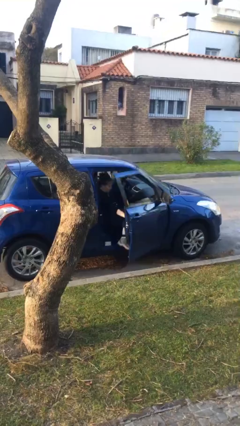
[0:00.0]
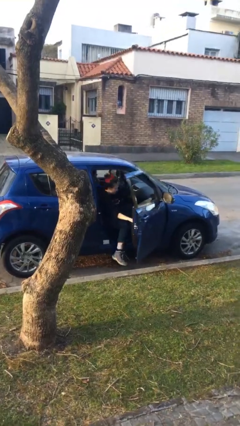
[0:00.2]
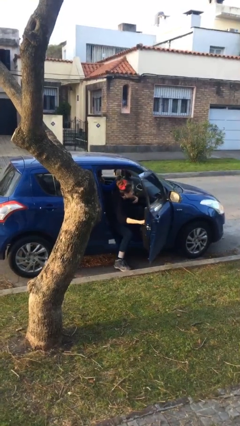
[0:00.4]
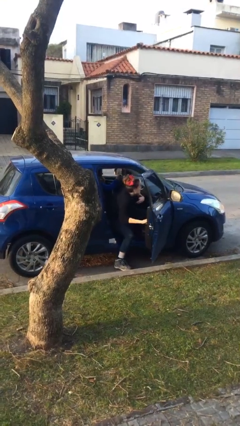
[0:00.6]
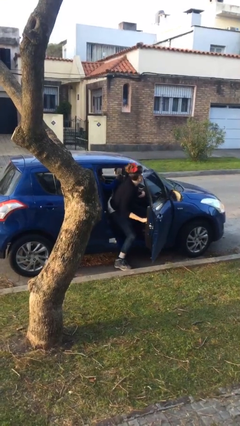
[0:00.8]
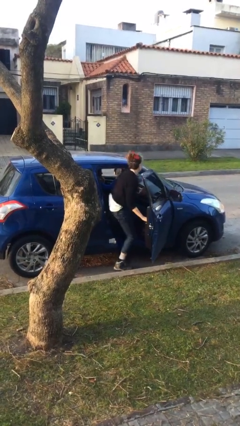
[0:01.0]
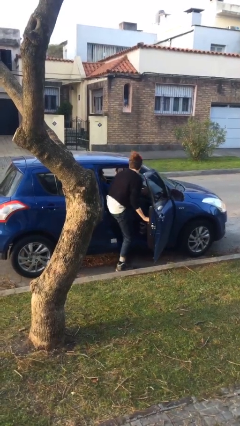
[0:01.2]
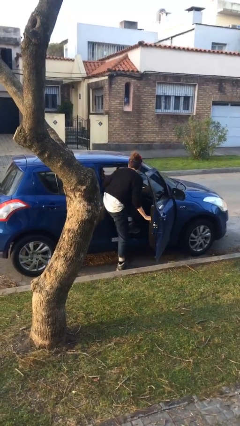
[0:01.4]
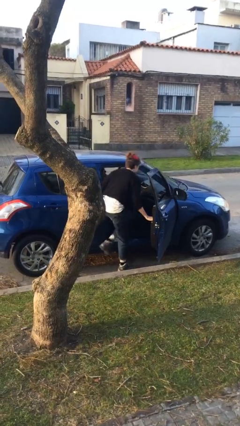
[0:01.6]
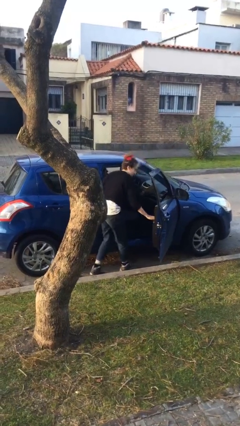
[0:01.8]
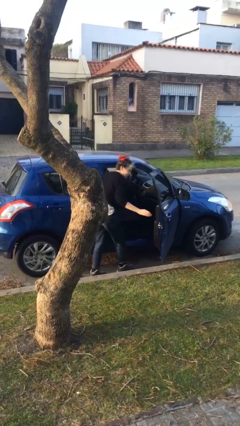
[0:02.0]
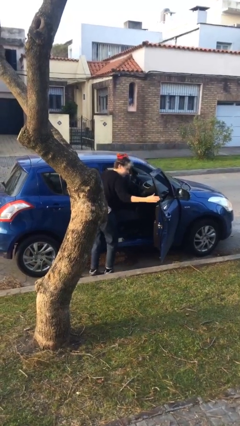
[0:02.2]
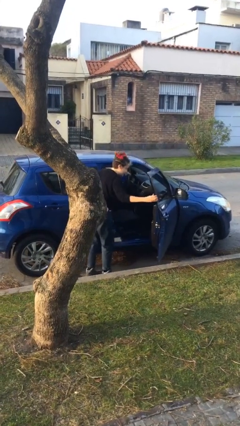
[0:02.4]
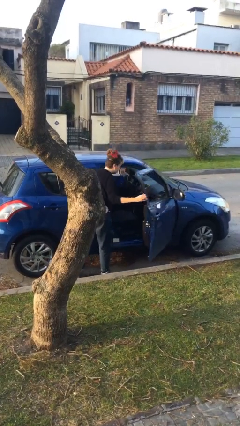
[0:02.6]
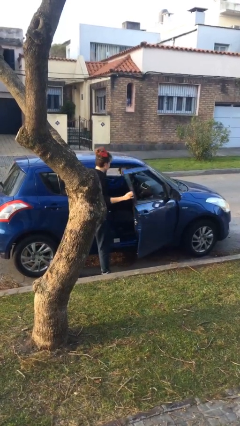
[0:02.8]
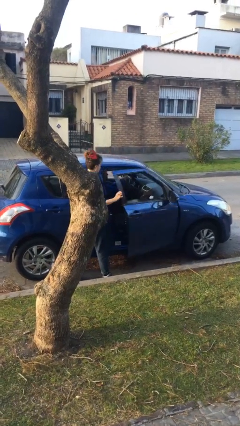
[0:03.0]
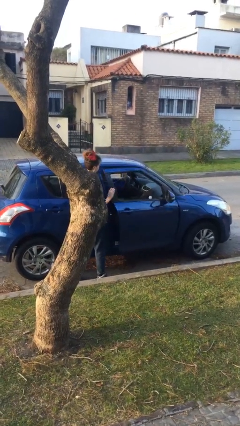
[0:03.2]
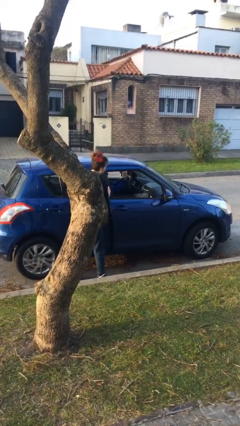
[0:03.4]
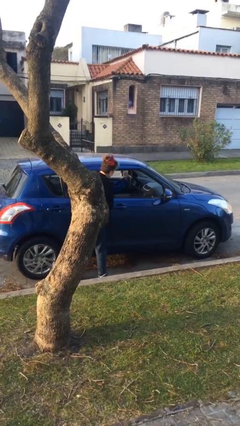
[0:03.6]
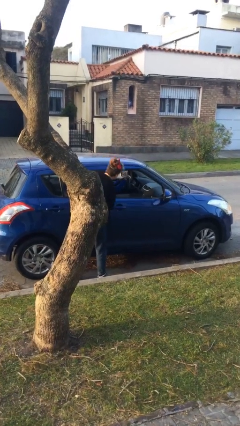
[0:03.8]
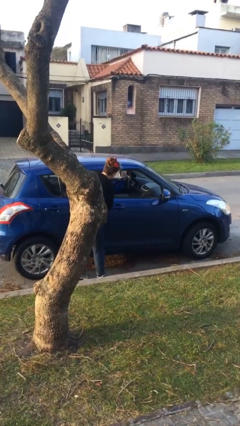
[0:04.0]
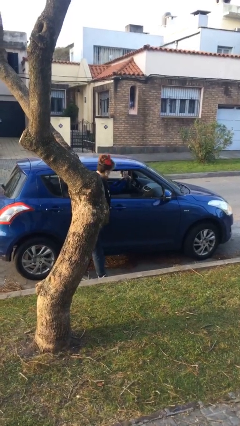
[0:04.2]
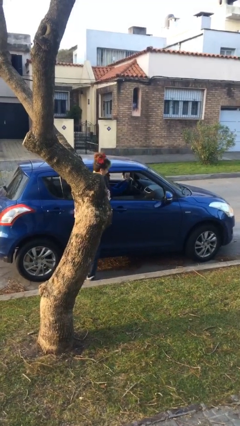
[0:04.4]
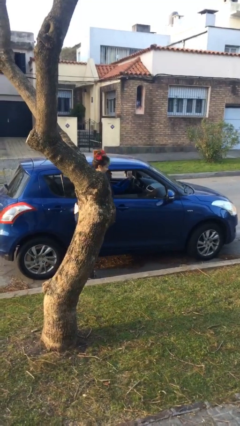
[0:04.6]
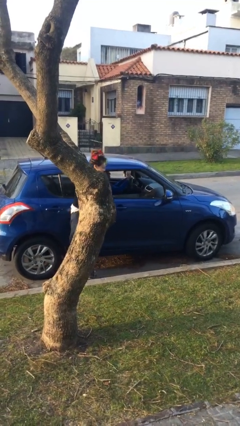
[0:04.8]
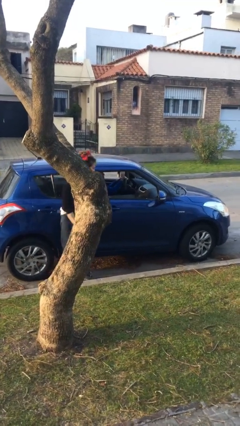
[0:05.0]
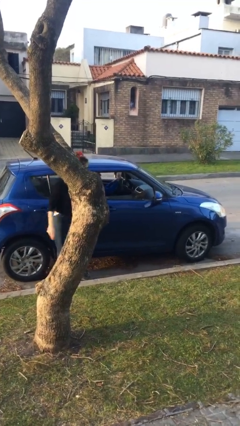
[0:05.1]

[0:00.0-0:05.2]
car drops off person

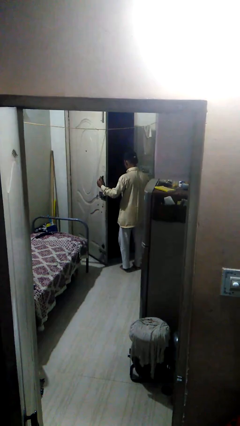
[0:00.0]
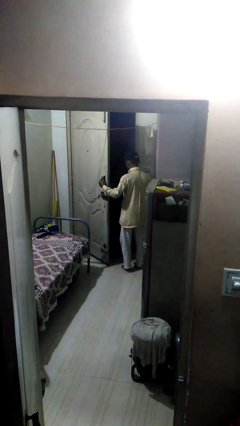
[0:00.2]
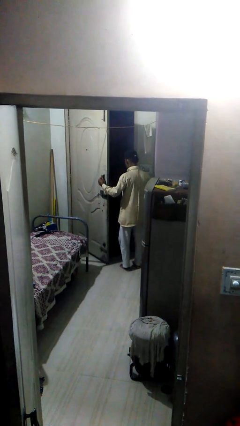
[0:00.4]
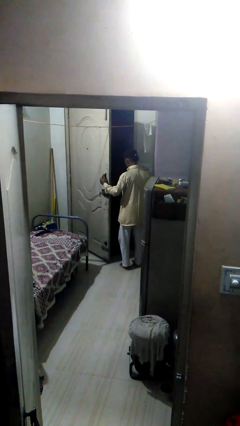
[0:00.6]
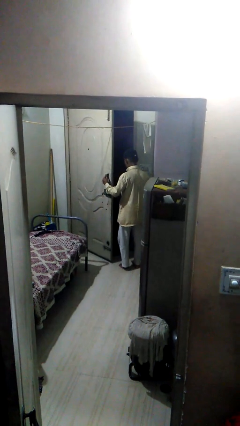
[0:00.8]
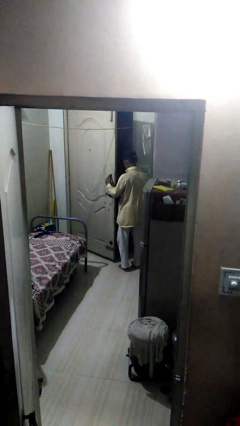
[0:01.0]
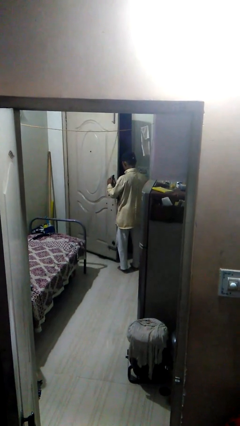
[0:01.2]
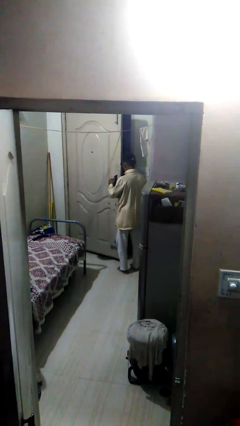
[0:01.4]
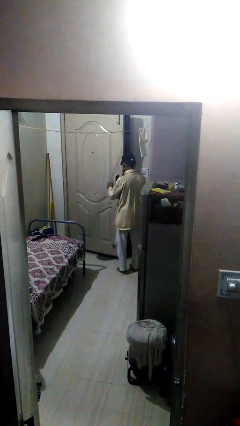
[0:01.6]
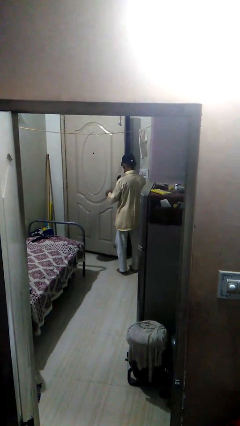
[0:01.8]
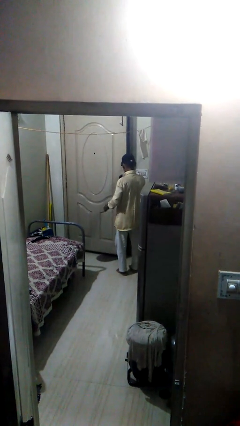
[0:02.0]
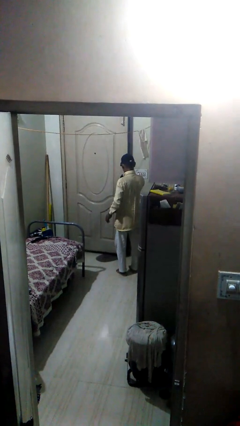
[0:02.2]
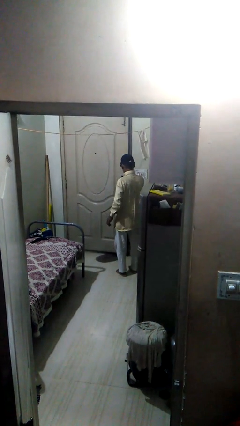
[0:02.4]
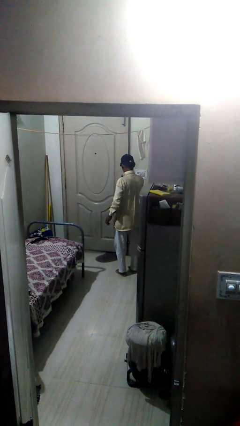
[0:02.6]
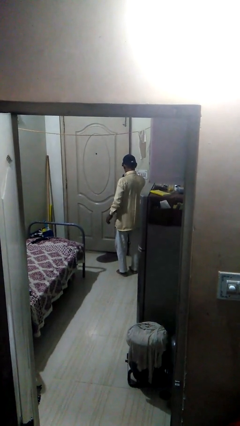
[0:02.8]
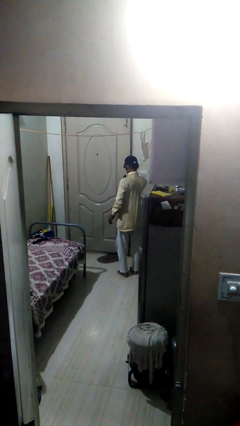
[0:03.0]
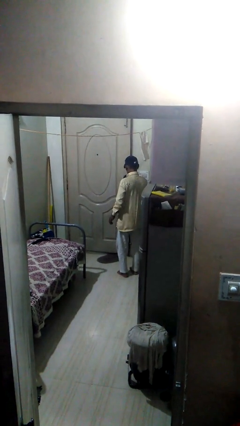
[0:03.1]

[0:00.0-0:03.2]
person closes facility door

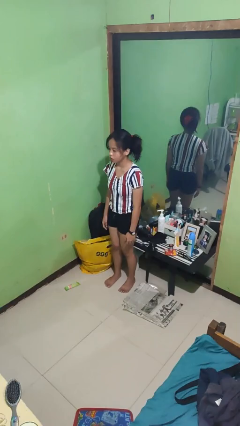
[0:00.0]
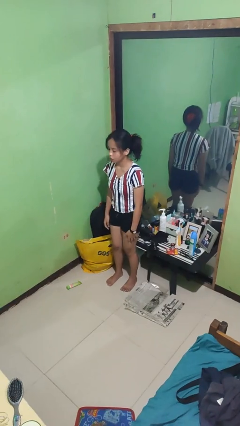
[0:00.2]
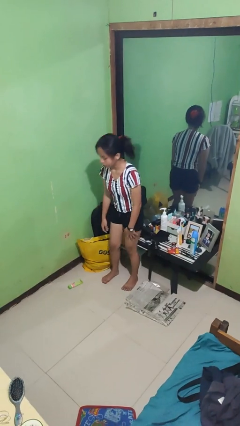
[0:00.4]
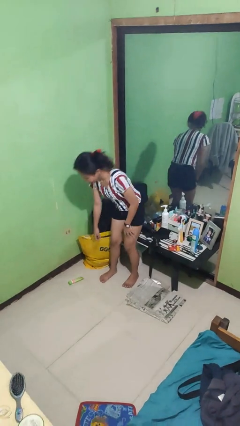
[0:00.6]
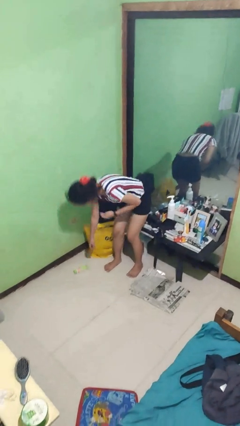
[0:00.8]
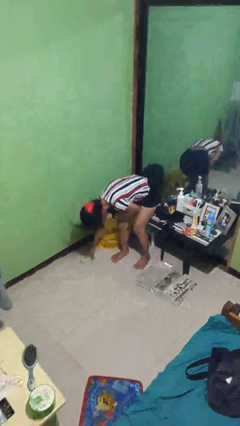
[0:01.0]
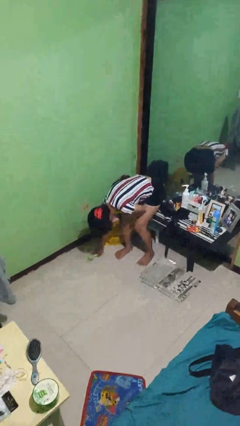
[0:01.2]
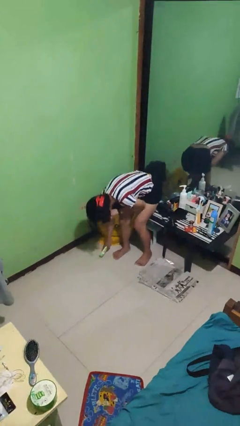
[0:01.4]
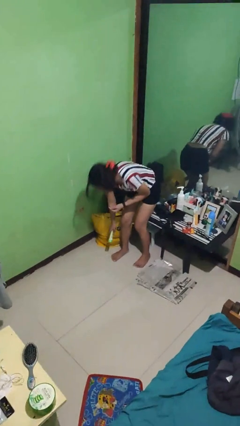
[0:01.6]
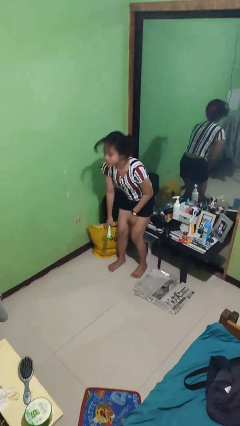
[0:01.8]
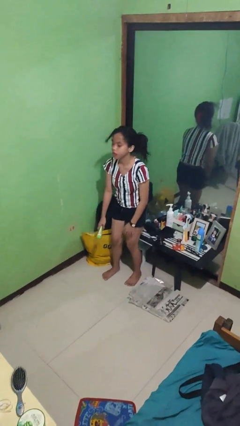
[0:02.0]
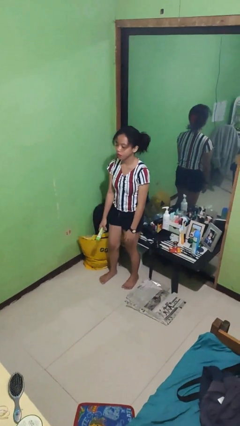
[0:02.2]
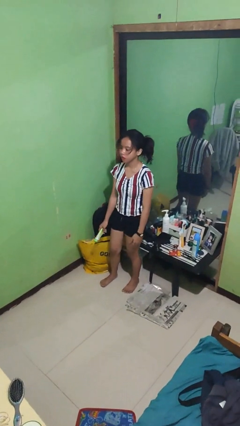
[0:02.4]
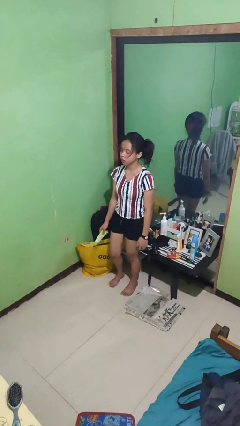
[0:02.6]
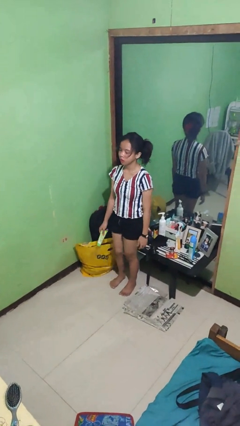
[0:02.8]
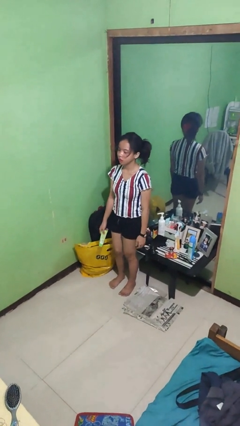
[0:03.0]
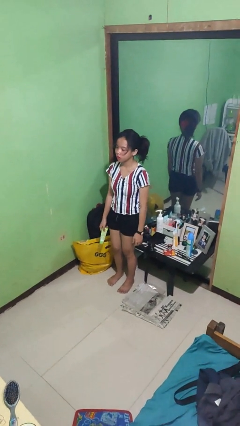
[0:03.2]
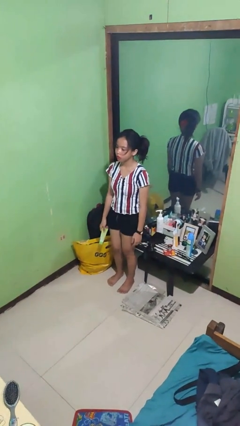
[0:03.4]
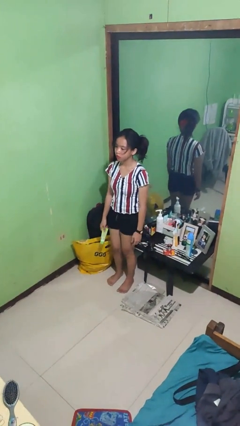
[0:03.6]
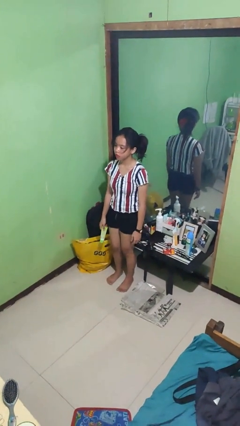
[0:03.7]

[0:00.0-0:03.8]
person picks up object from floor

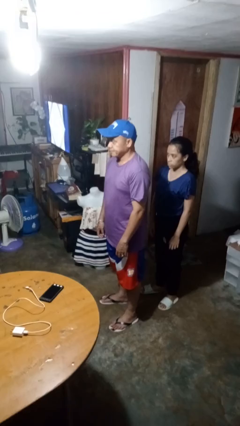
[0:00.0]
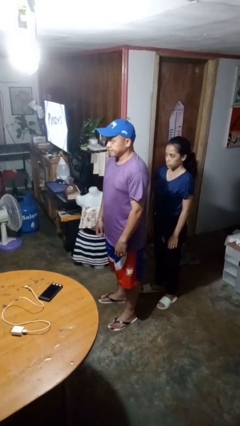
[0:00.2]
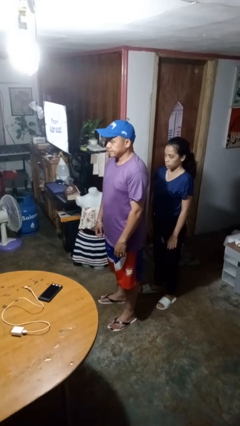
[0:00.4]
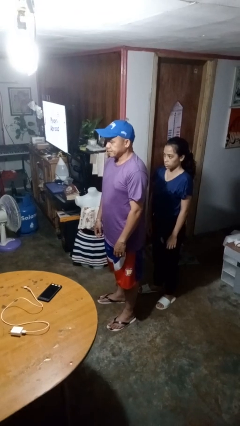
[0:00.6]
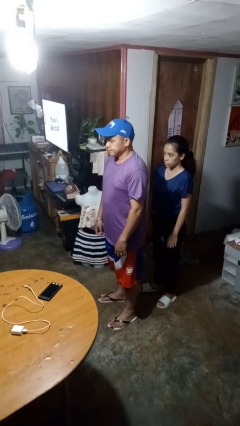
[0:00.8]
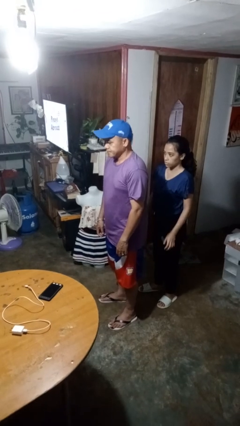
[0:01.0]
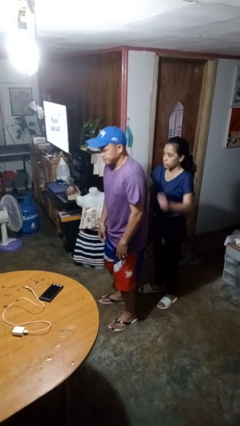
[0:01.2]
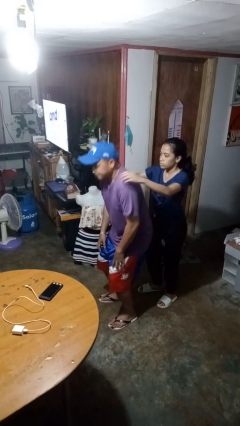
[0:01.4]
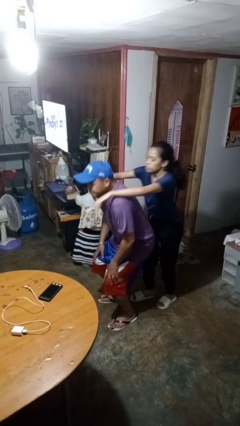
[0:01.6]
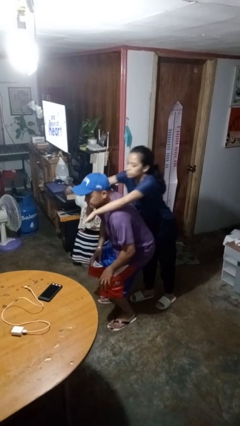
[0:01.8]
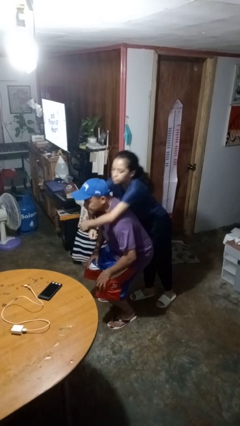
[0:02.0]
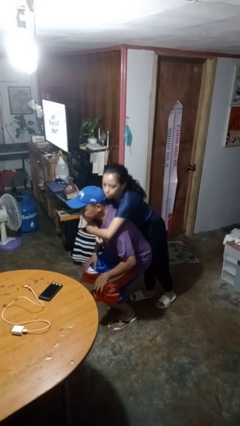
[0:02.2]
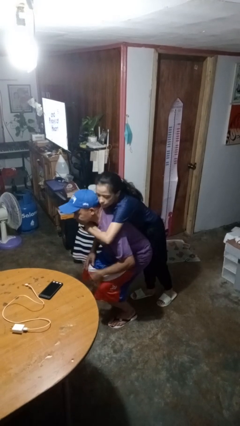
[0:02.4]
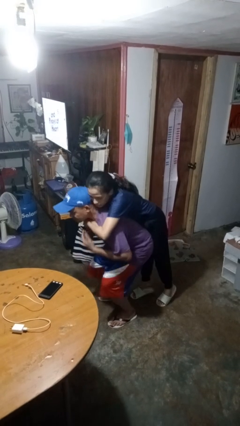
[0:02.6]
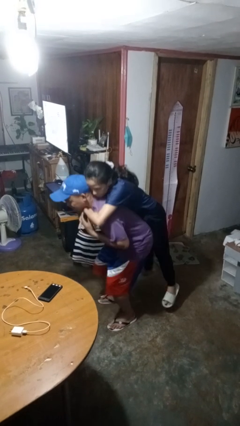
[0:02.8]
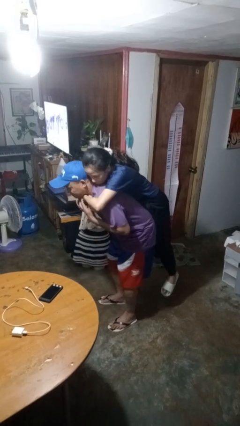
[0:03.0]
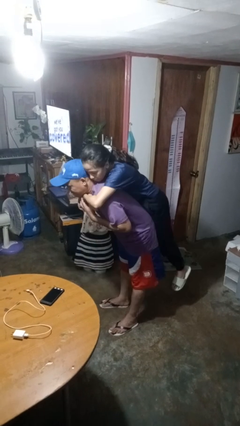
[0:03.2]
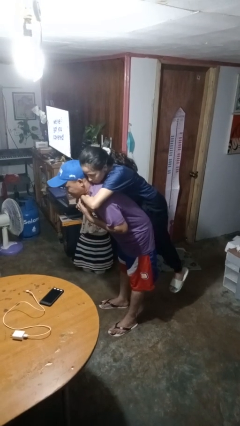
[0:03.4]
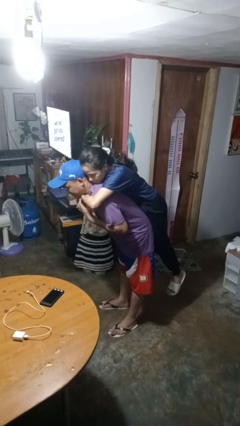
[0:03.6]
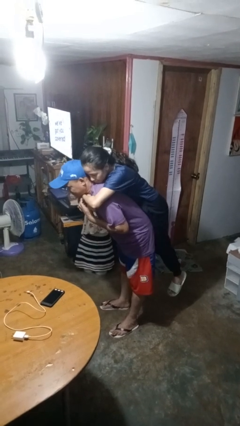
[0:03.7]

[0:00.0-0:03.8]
person picks up person

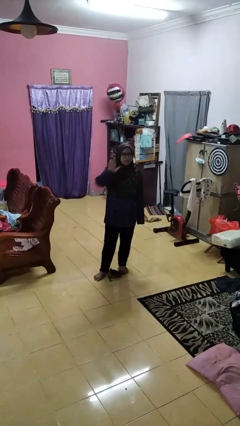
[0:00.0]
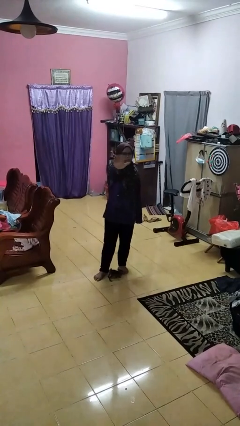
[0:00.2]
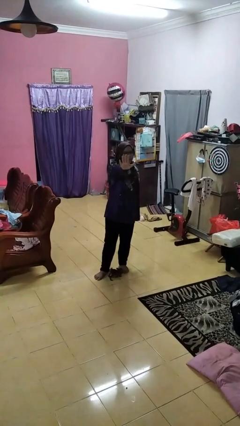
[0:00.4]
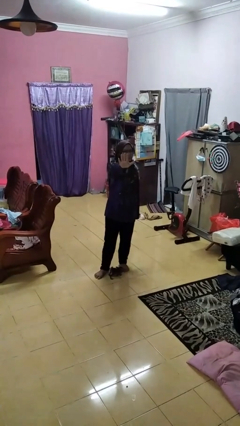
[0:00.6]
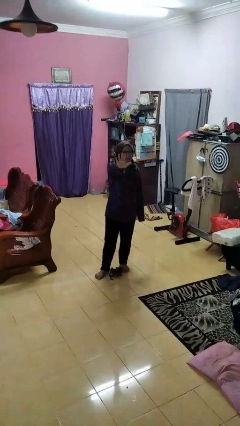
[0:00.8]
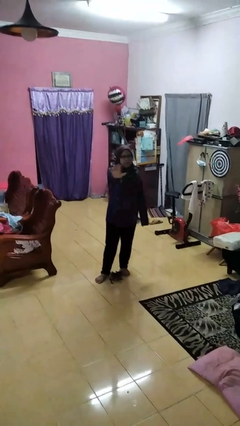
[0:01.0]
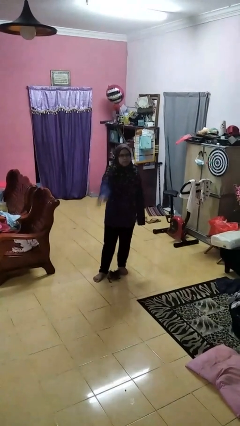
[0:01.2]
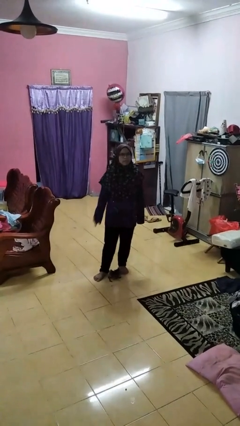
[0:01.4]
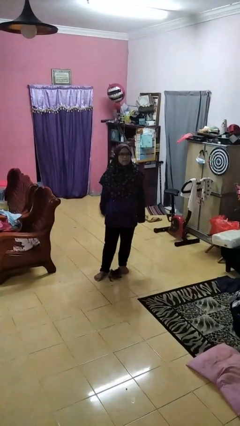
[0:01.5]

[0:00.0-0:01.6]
person gestures stop

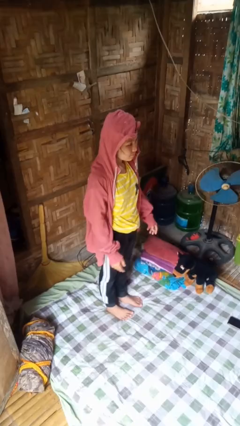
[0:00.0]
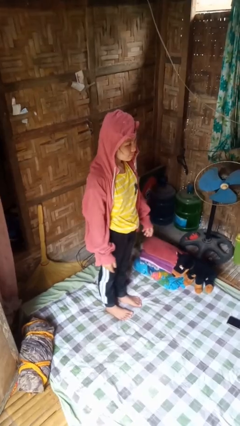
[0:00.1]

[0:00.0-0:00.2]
person takes off hoodie
